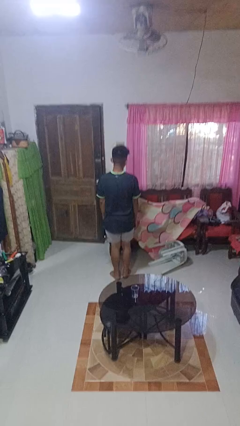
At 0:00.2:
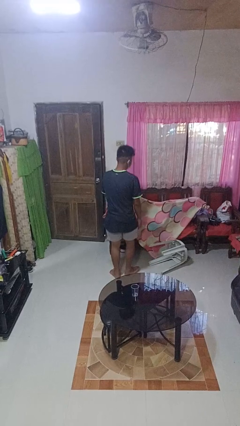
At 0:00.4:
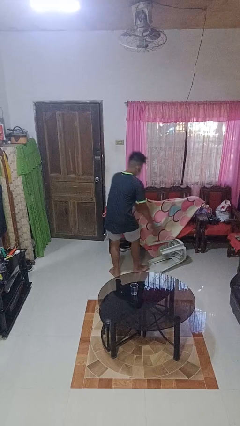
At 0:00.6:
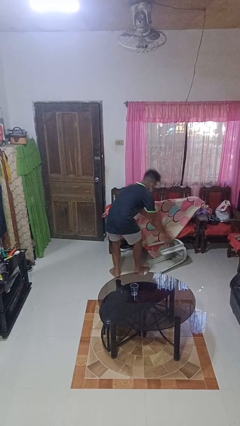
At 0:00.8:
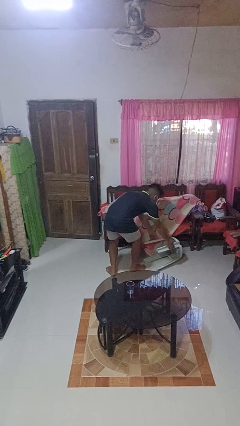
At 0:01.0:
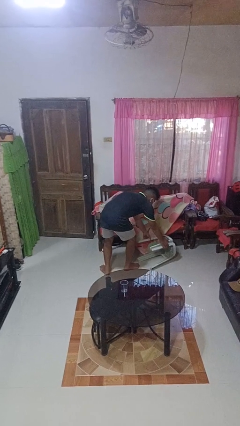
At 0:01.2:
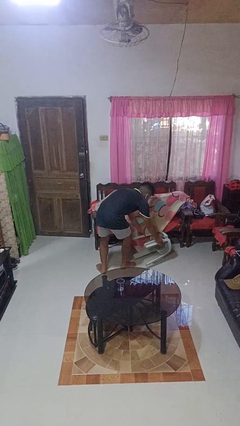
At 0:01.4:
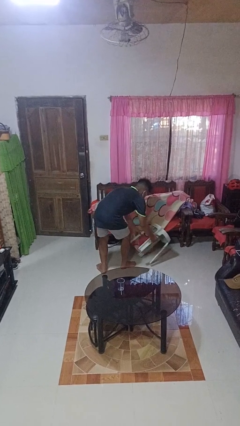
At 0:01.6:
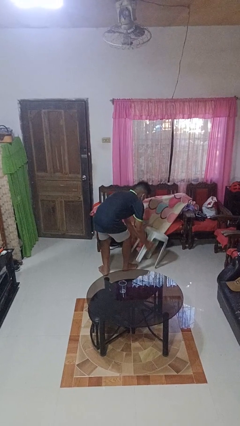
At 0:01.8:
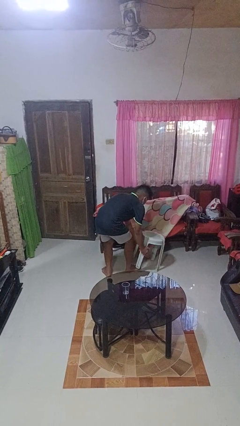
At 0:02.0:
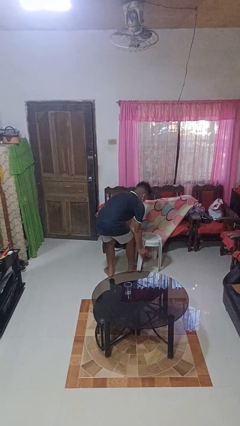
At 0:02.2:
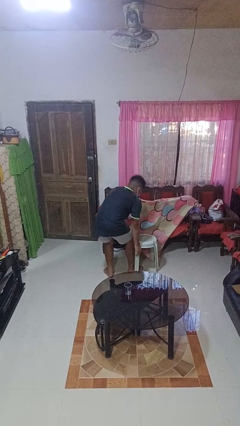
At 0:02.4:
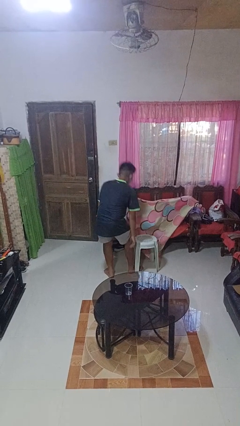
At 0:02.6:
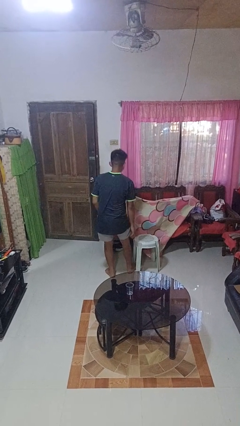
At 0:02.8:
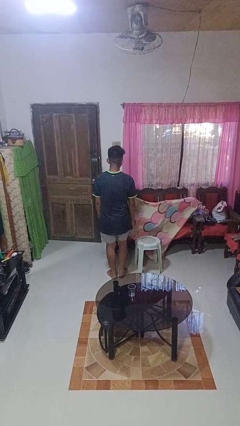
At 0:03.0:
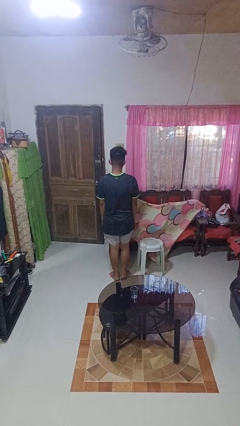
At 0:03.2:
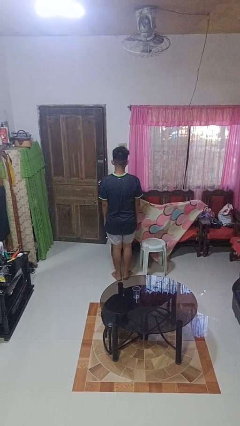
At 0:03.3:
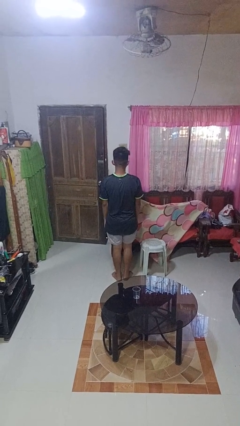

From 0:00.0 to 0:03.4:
person sets upright furniture

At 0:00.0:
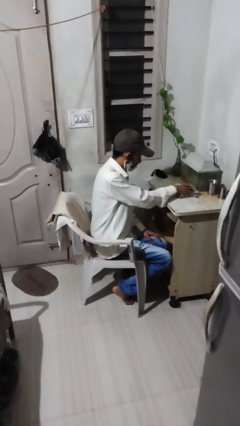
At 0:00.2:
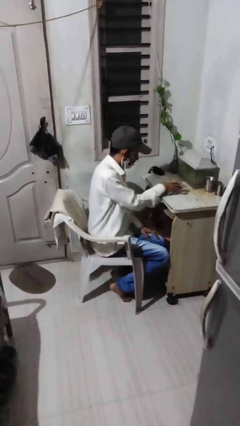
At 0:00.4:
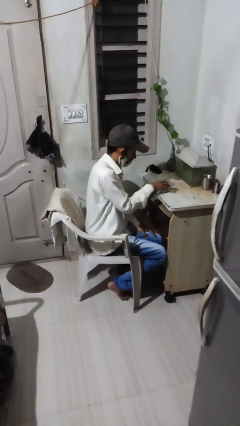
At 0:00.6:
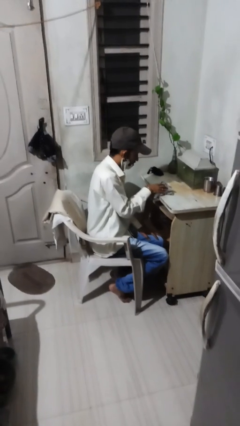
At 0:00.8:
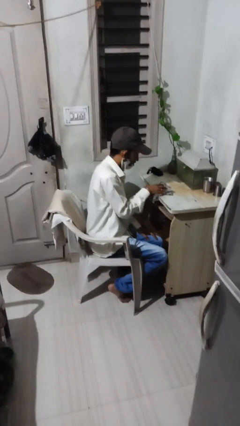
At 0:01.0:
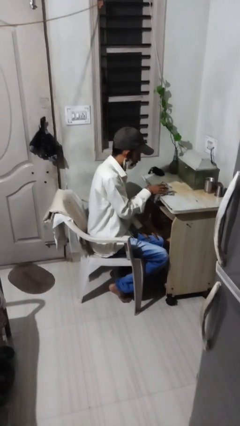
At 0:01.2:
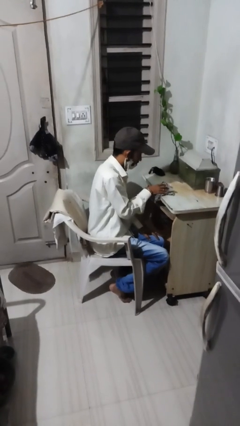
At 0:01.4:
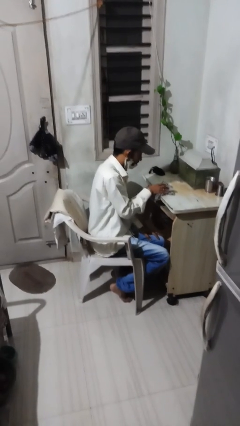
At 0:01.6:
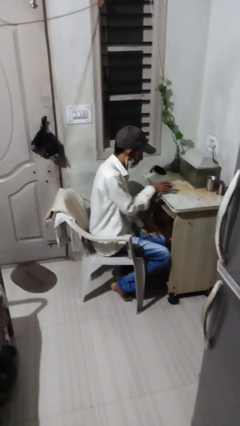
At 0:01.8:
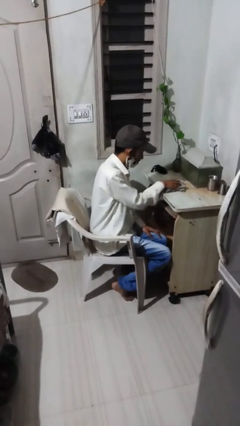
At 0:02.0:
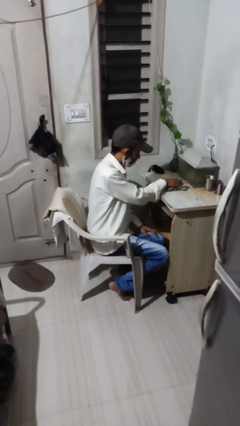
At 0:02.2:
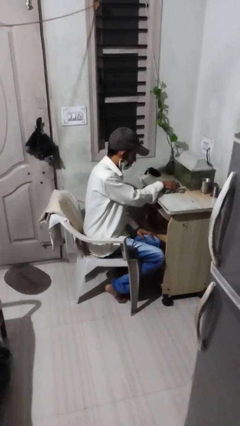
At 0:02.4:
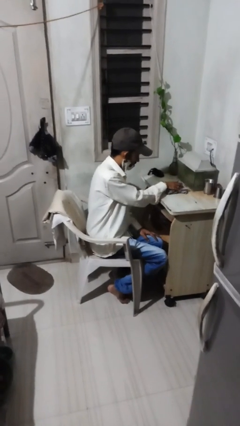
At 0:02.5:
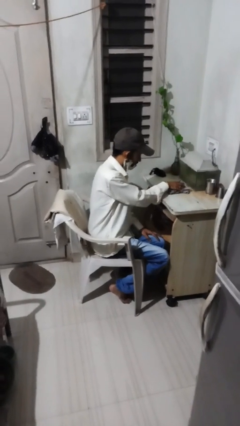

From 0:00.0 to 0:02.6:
person cleans table with rag

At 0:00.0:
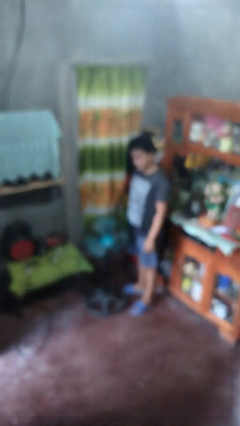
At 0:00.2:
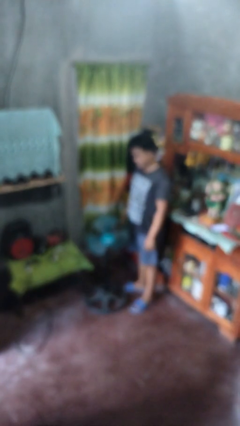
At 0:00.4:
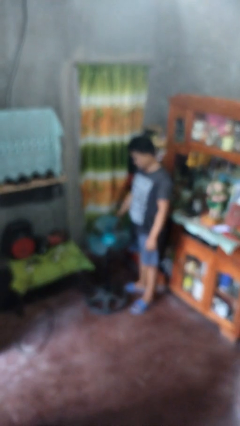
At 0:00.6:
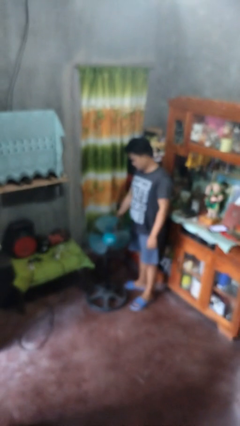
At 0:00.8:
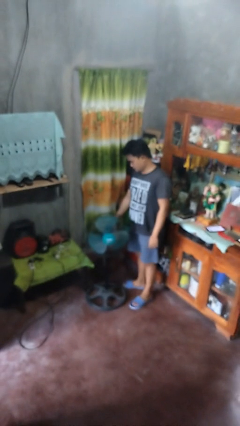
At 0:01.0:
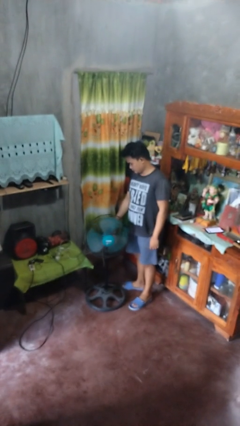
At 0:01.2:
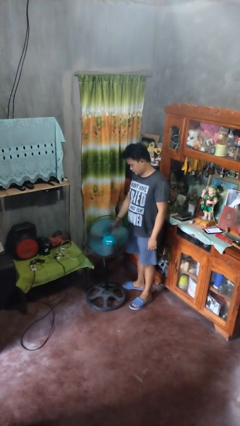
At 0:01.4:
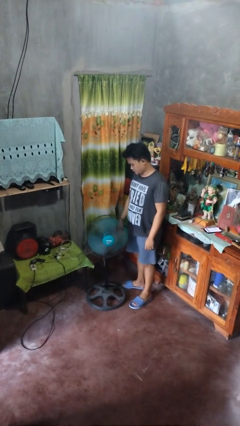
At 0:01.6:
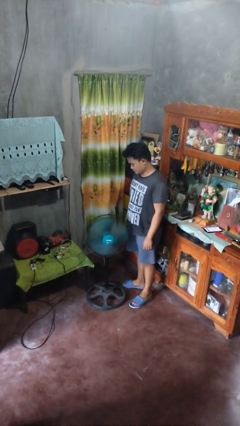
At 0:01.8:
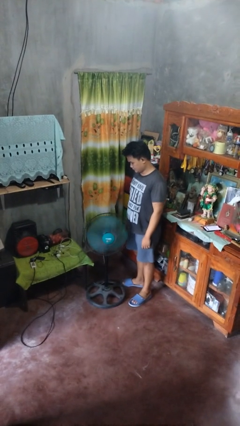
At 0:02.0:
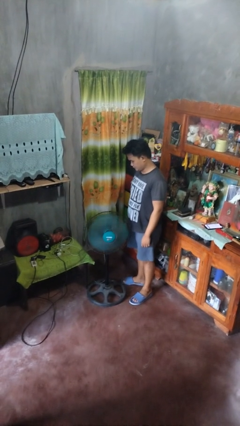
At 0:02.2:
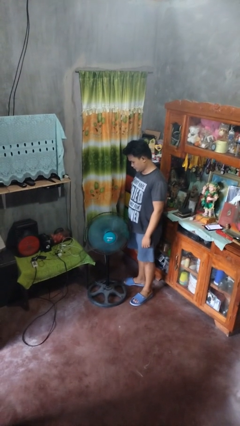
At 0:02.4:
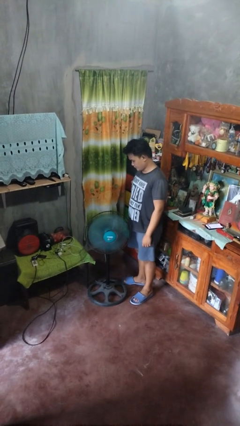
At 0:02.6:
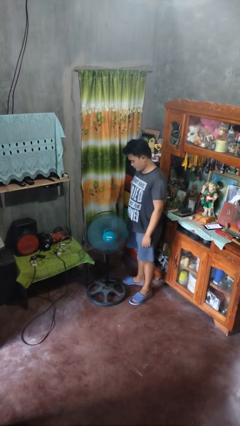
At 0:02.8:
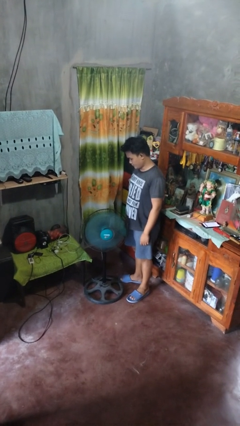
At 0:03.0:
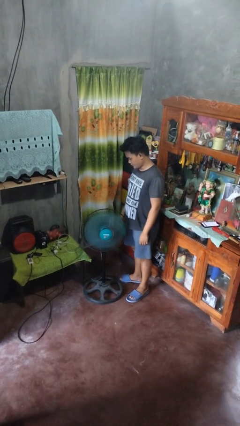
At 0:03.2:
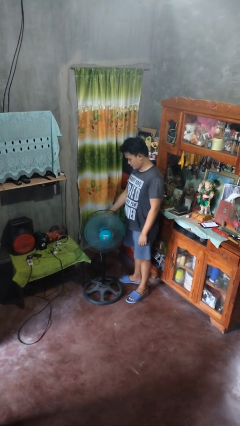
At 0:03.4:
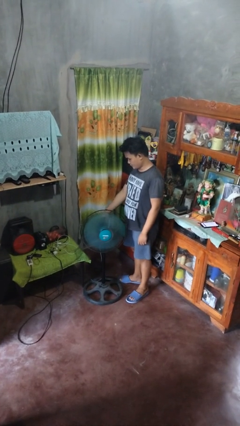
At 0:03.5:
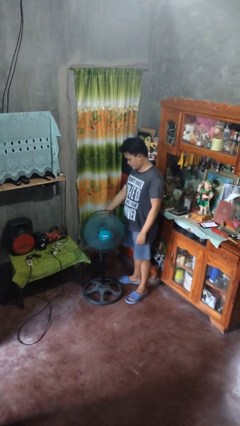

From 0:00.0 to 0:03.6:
person turns on fan

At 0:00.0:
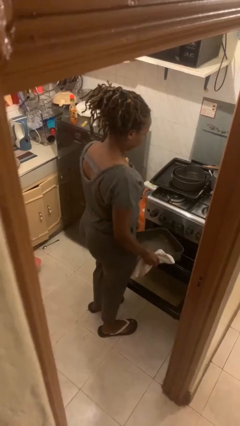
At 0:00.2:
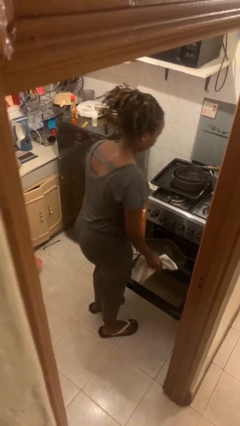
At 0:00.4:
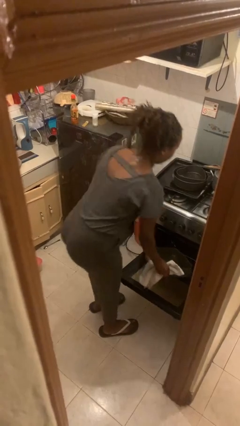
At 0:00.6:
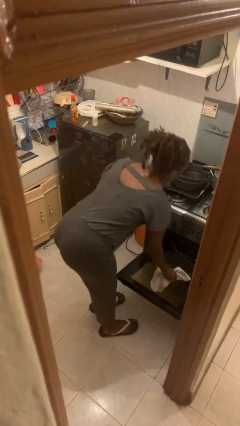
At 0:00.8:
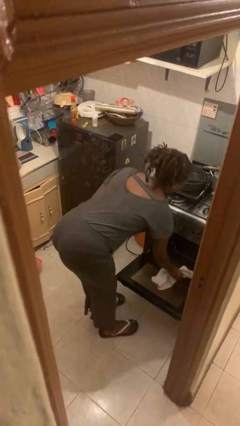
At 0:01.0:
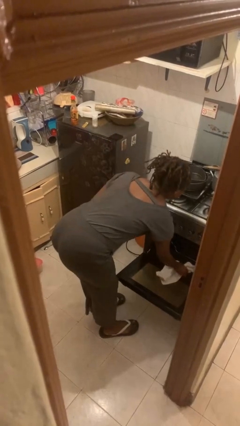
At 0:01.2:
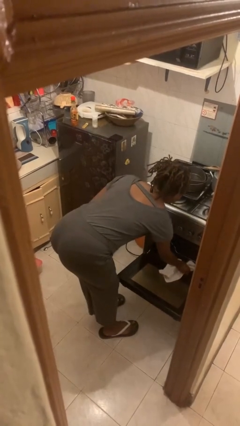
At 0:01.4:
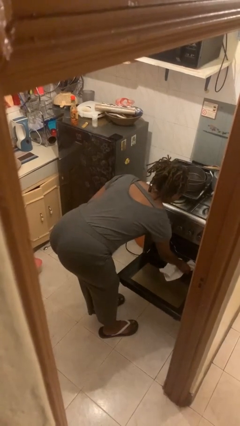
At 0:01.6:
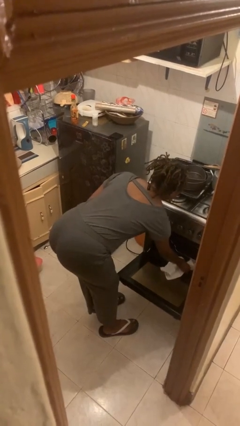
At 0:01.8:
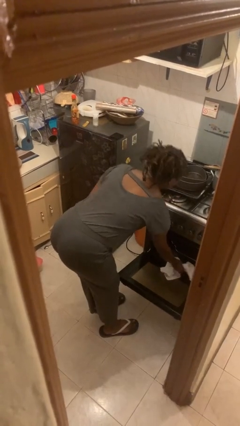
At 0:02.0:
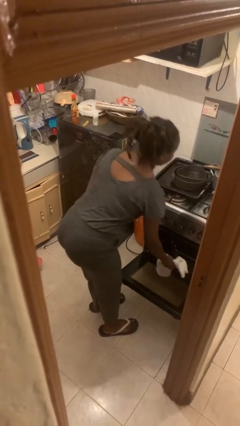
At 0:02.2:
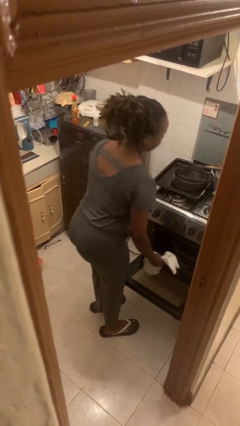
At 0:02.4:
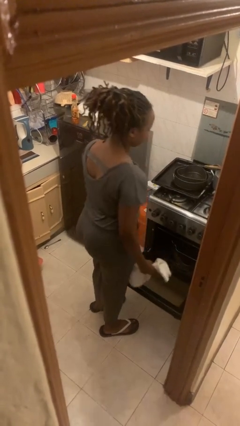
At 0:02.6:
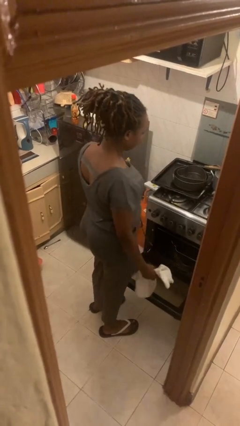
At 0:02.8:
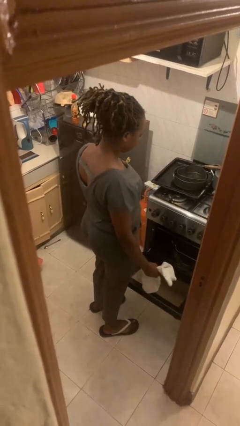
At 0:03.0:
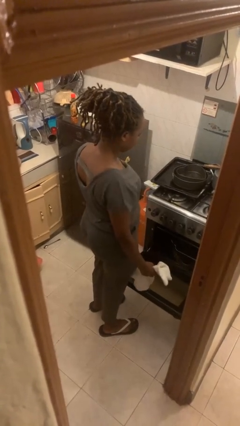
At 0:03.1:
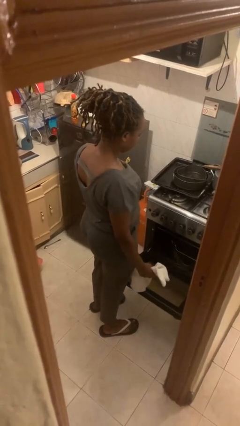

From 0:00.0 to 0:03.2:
person puts object into oven

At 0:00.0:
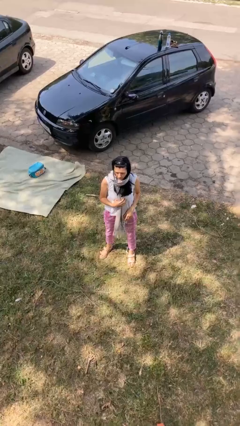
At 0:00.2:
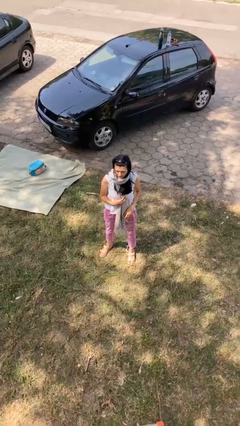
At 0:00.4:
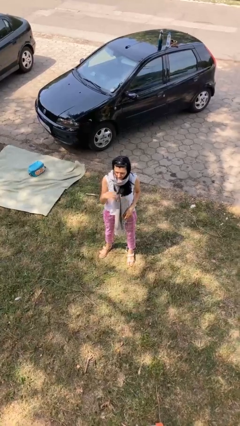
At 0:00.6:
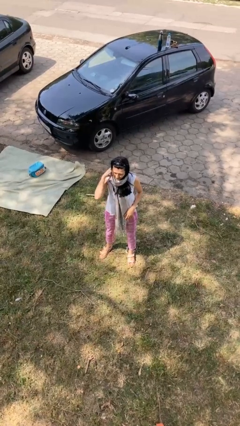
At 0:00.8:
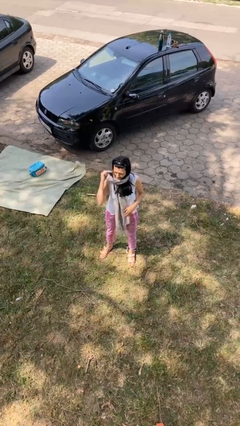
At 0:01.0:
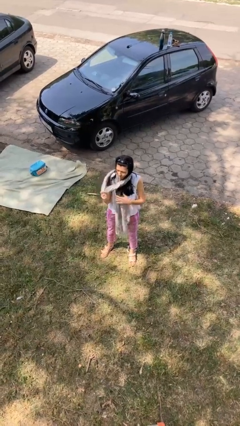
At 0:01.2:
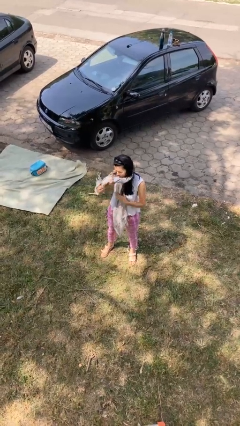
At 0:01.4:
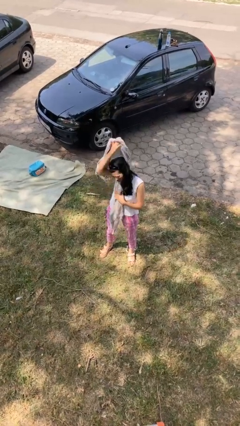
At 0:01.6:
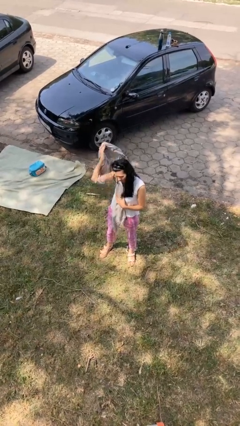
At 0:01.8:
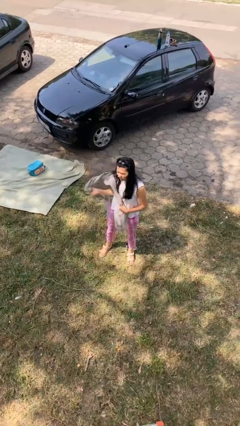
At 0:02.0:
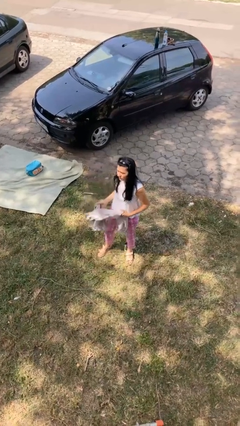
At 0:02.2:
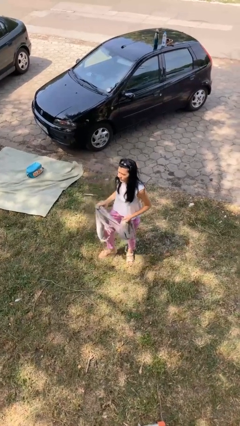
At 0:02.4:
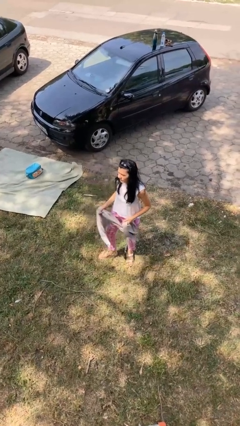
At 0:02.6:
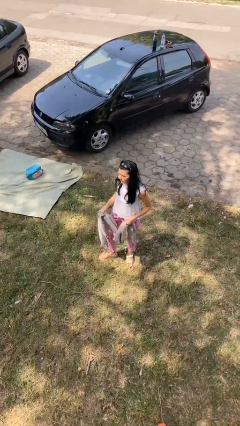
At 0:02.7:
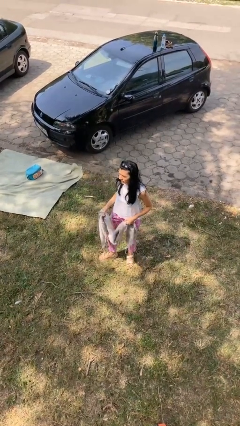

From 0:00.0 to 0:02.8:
person takes off scarf

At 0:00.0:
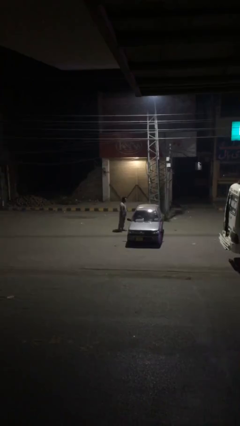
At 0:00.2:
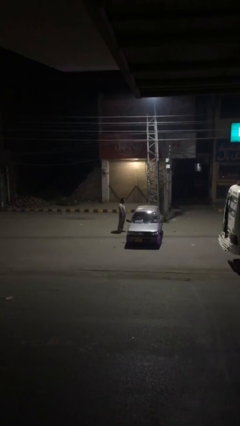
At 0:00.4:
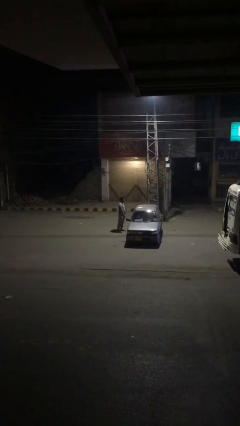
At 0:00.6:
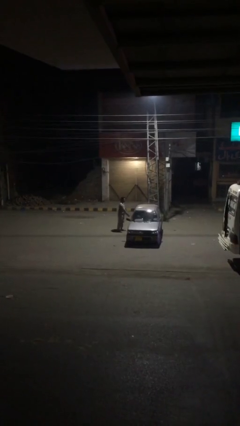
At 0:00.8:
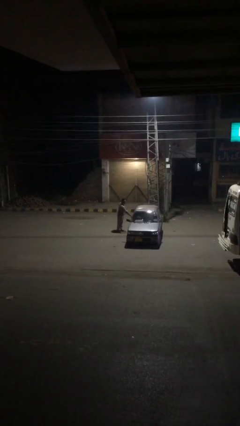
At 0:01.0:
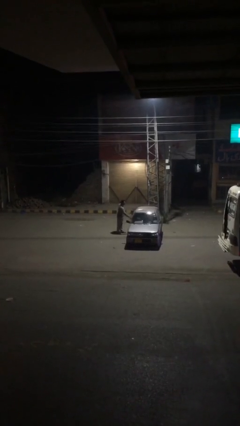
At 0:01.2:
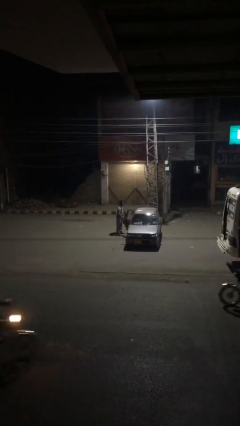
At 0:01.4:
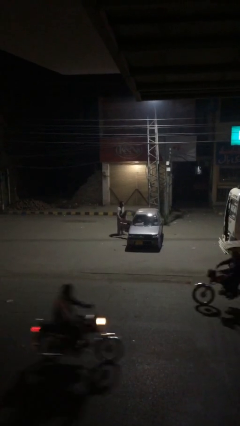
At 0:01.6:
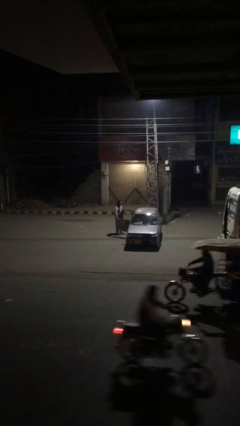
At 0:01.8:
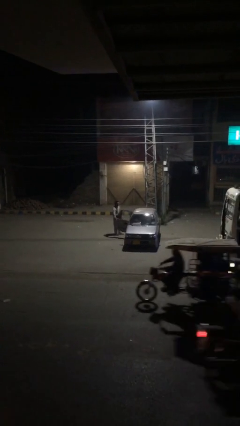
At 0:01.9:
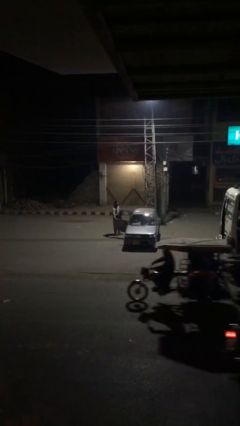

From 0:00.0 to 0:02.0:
person opens car door
